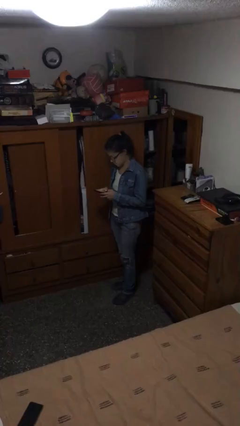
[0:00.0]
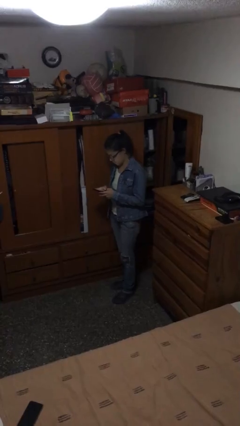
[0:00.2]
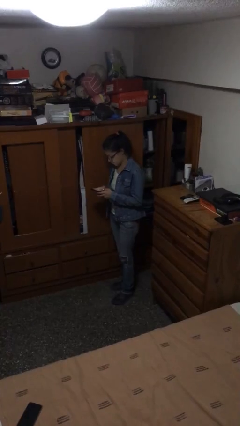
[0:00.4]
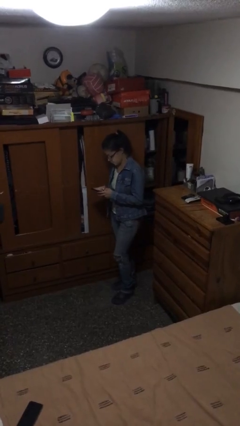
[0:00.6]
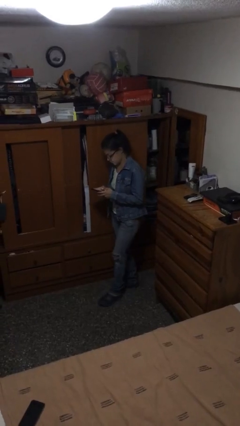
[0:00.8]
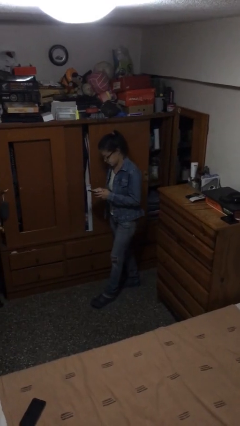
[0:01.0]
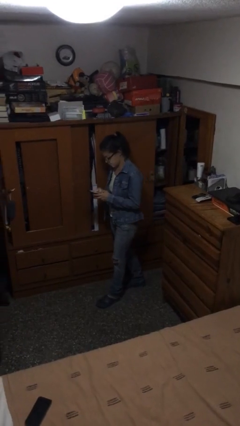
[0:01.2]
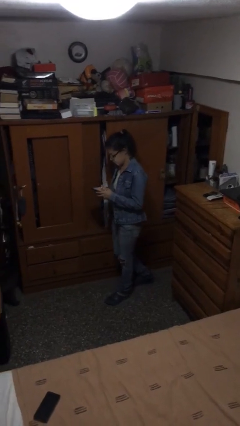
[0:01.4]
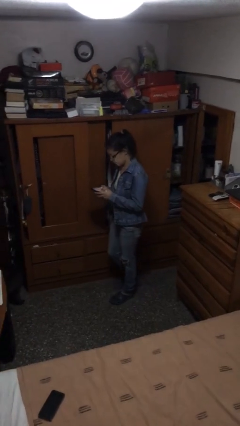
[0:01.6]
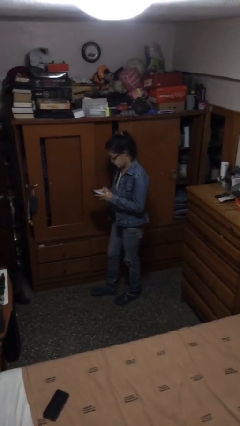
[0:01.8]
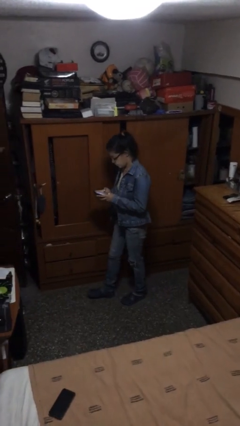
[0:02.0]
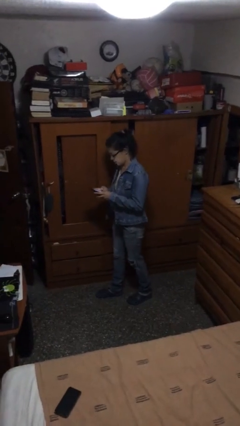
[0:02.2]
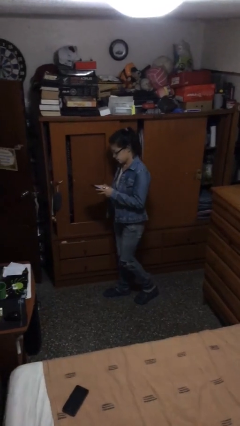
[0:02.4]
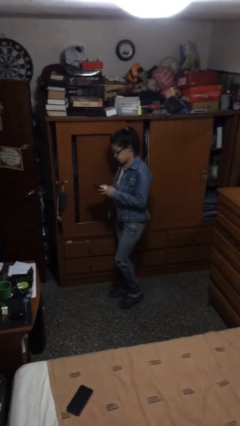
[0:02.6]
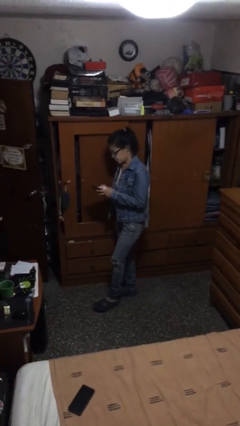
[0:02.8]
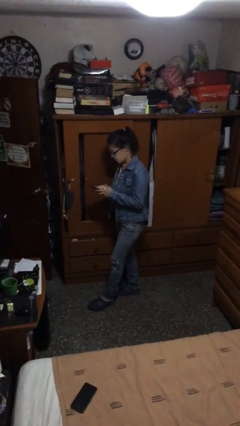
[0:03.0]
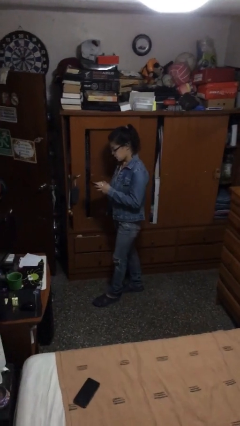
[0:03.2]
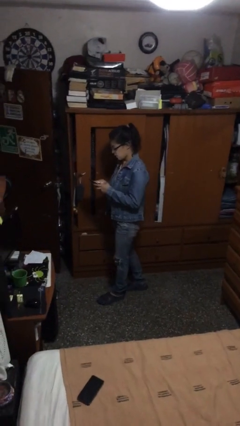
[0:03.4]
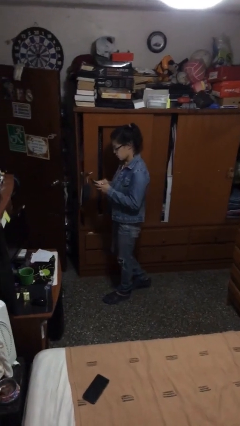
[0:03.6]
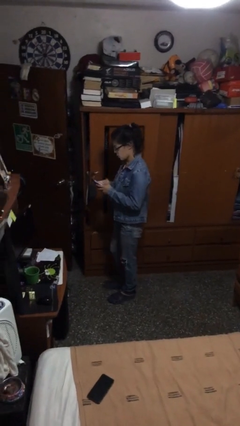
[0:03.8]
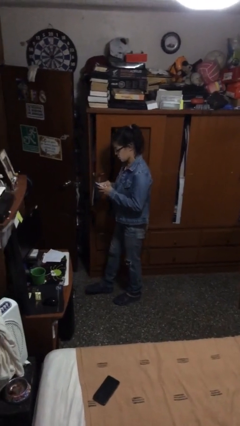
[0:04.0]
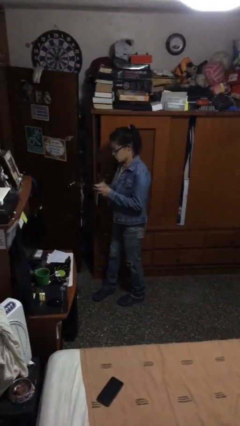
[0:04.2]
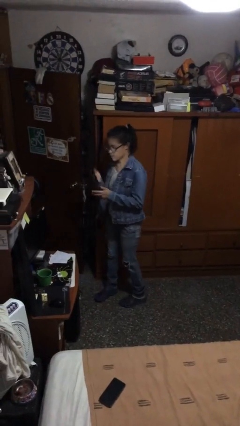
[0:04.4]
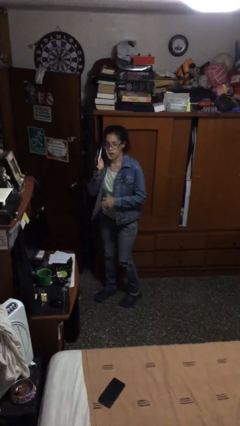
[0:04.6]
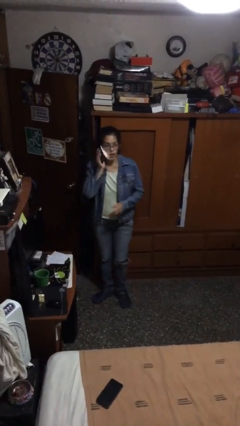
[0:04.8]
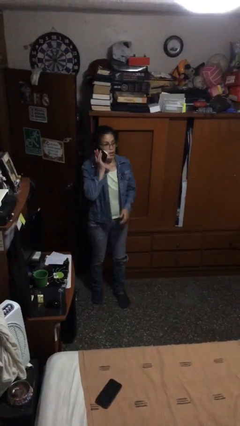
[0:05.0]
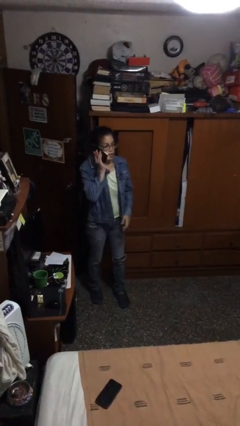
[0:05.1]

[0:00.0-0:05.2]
person texts on phone

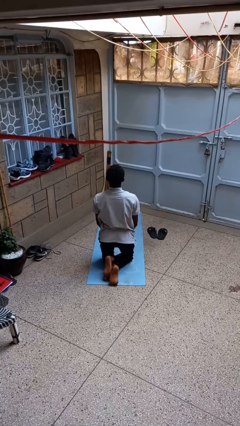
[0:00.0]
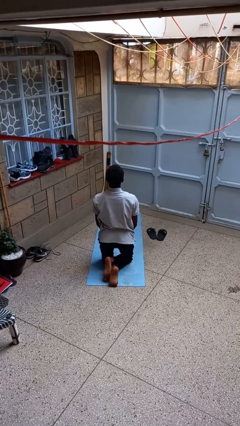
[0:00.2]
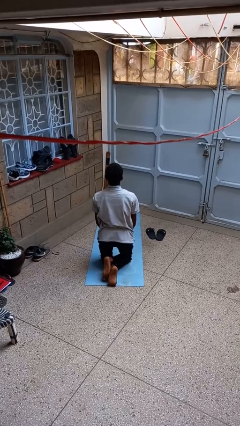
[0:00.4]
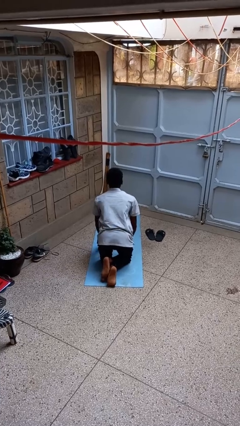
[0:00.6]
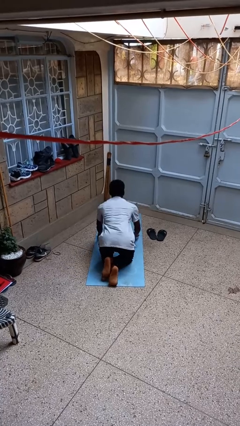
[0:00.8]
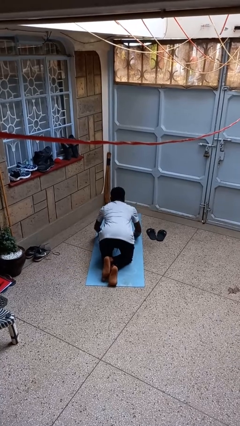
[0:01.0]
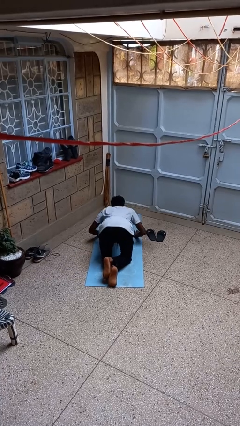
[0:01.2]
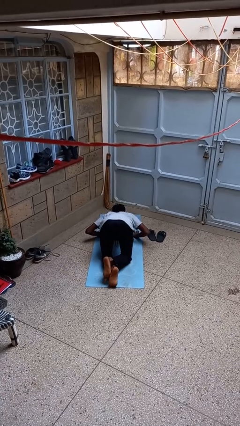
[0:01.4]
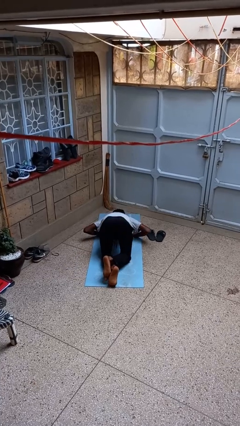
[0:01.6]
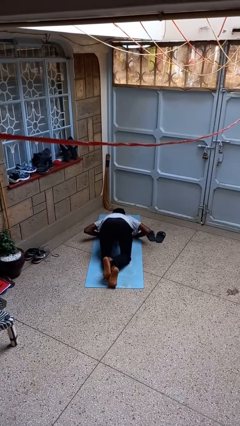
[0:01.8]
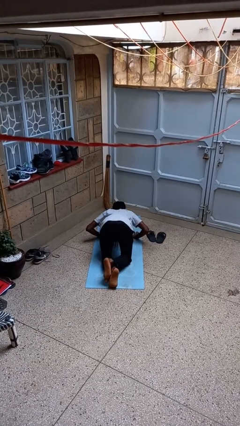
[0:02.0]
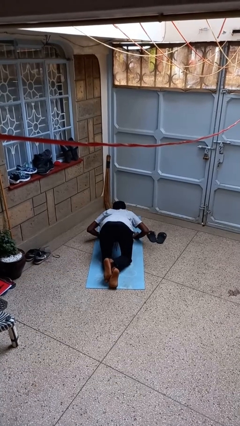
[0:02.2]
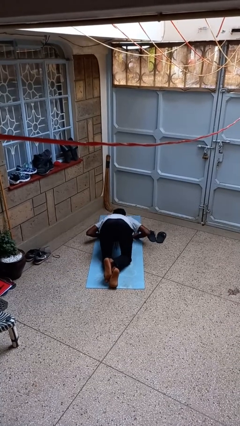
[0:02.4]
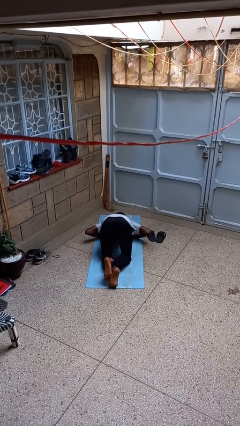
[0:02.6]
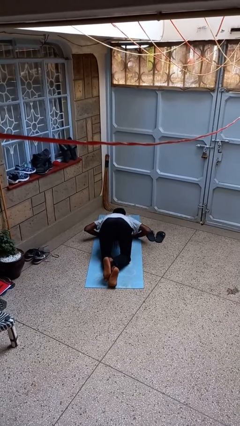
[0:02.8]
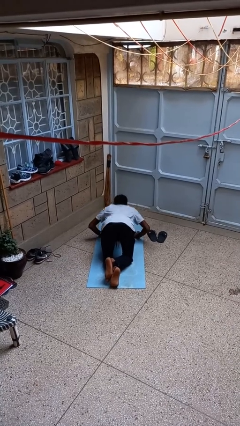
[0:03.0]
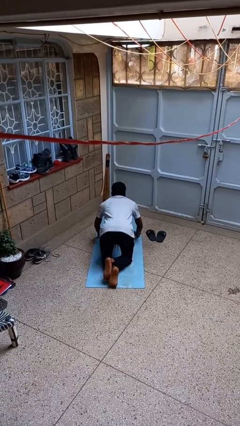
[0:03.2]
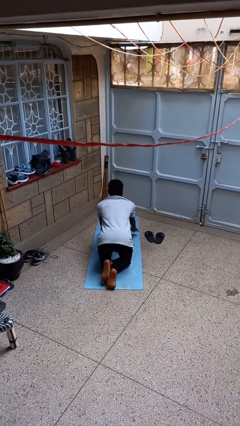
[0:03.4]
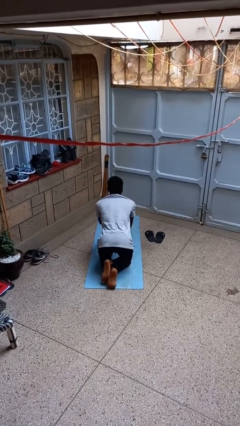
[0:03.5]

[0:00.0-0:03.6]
person exercises with pushup

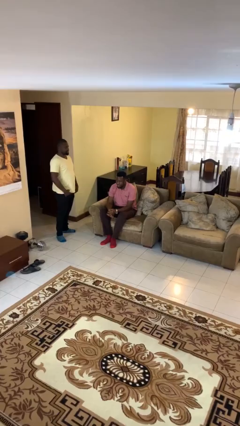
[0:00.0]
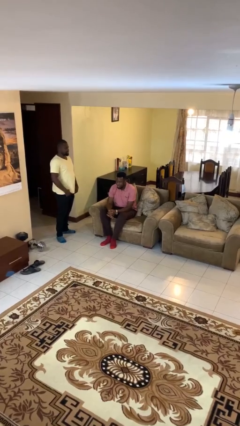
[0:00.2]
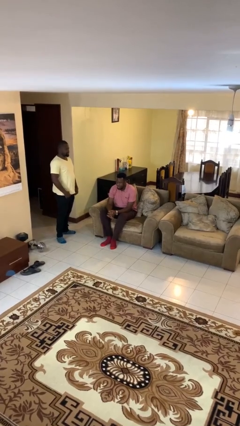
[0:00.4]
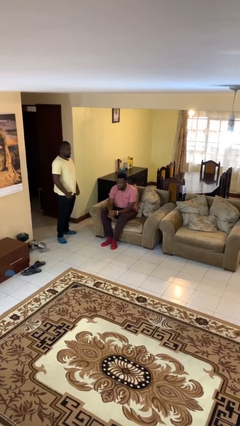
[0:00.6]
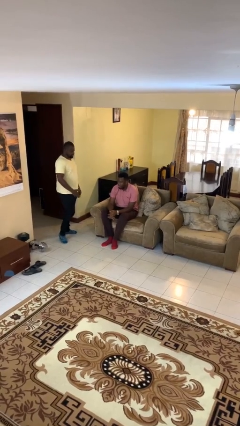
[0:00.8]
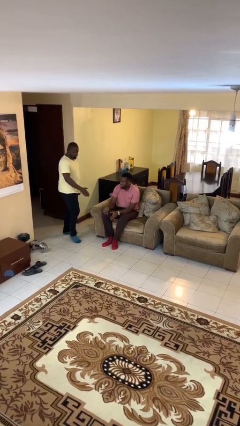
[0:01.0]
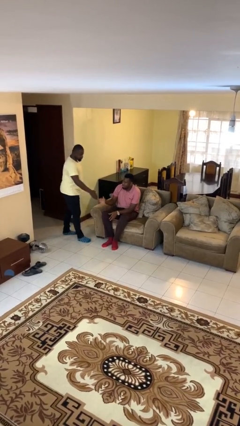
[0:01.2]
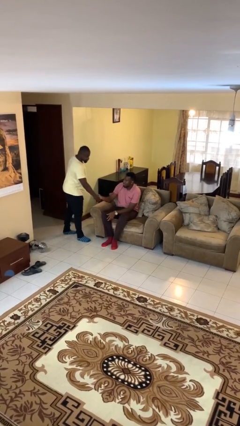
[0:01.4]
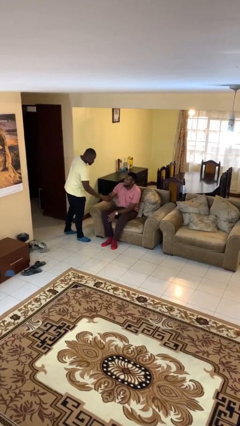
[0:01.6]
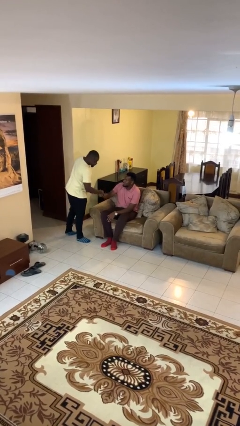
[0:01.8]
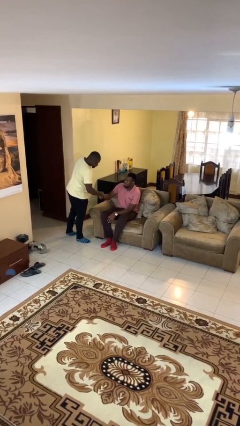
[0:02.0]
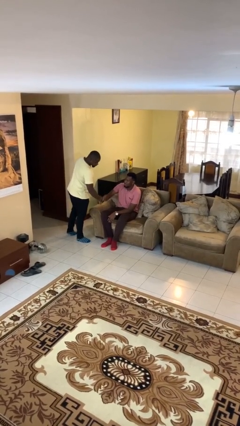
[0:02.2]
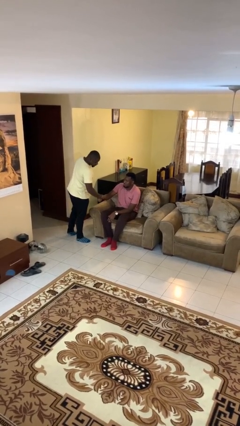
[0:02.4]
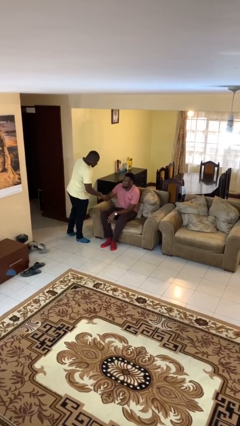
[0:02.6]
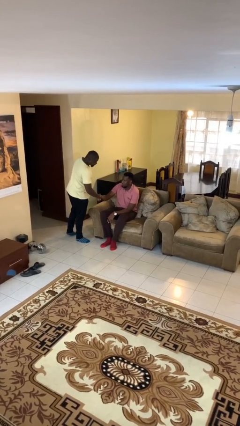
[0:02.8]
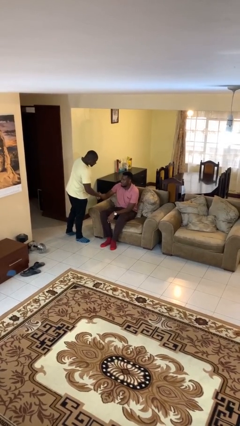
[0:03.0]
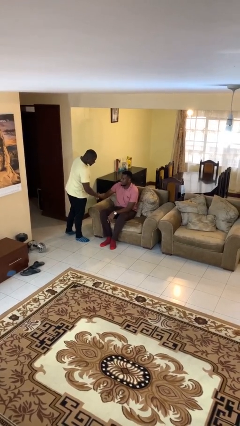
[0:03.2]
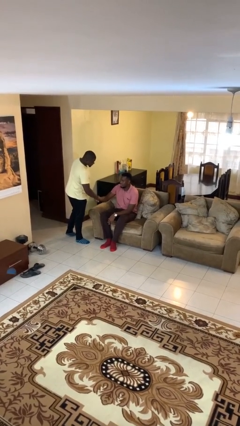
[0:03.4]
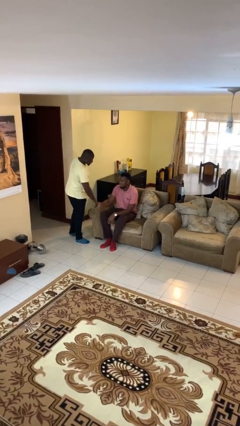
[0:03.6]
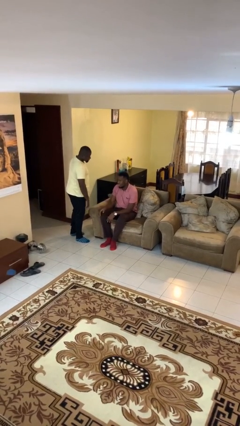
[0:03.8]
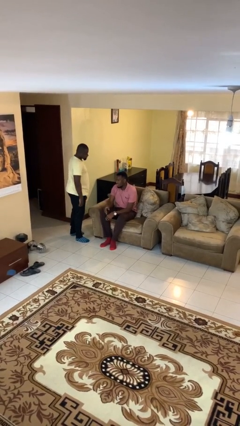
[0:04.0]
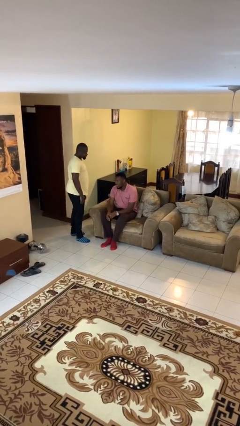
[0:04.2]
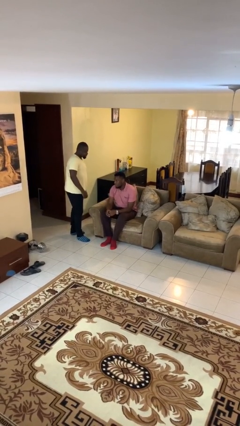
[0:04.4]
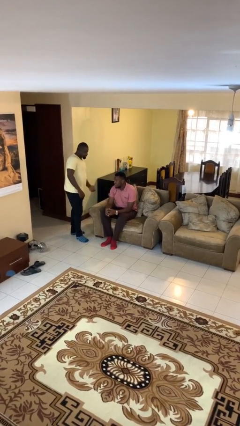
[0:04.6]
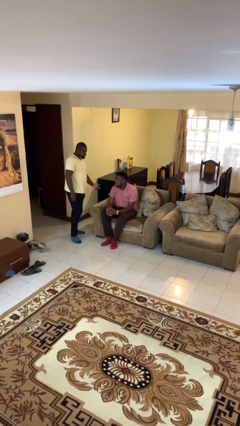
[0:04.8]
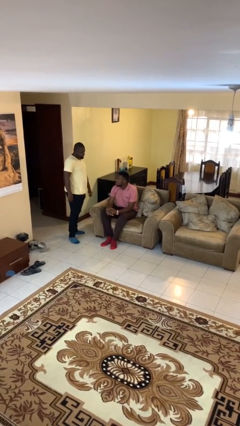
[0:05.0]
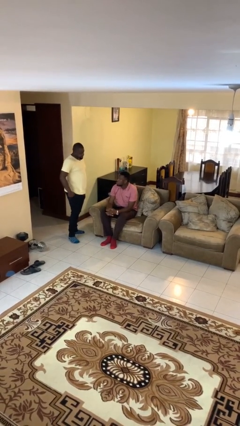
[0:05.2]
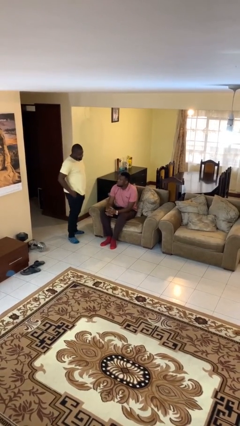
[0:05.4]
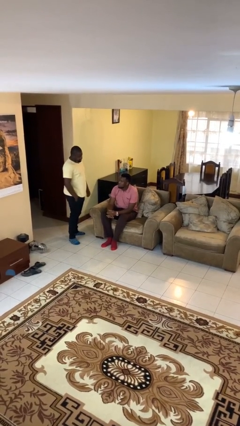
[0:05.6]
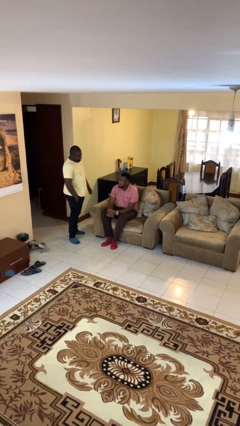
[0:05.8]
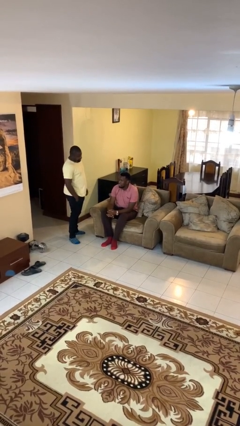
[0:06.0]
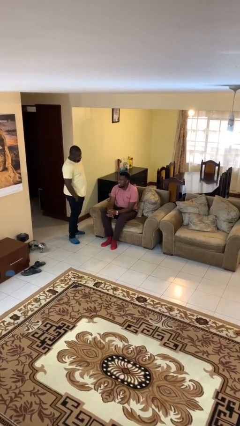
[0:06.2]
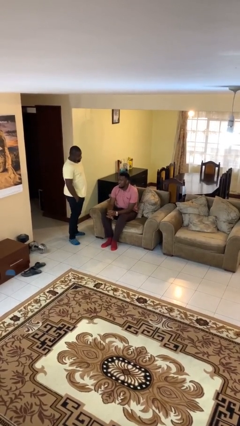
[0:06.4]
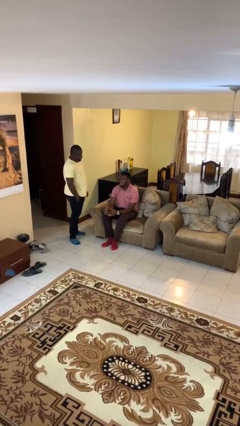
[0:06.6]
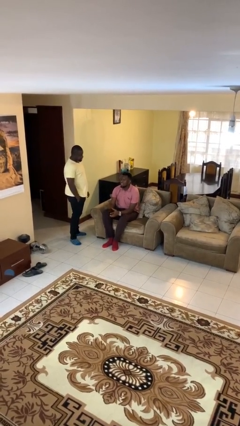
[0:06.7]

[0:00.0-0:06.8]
person shakes hand

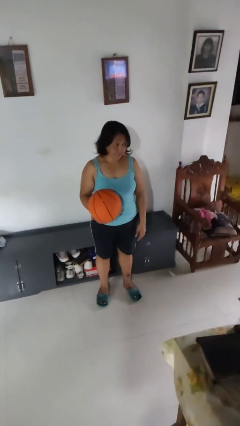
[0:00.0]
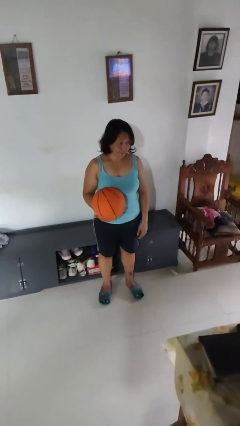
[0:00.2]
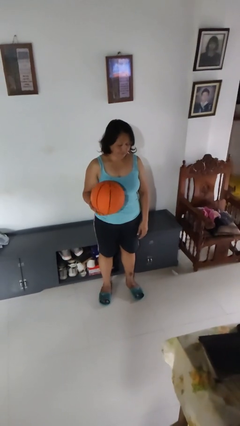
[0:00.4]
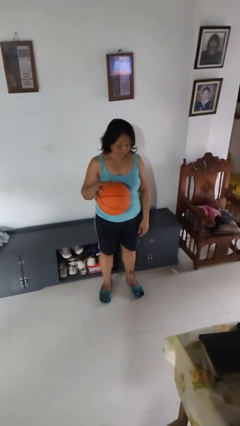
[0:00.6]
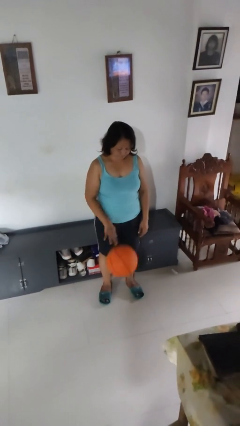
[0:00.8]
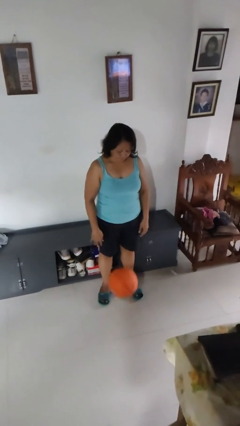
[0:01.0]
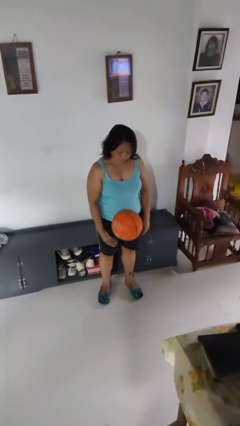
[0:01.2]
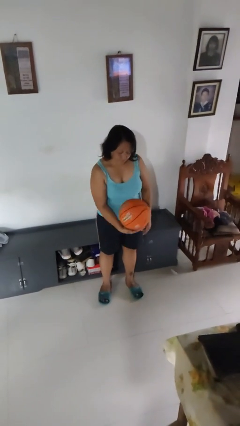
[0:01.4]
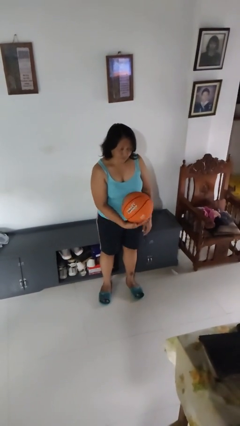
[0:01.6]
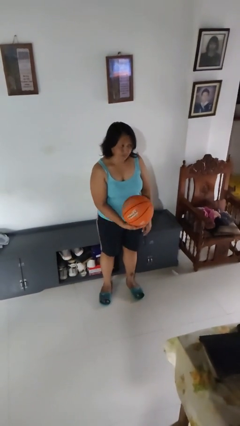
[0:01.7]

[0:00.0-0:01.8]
person bounces ball on floor
